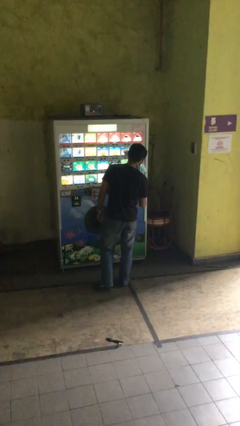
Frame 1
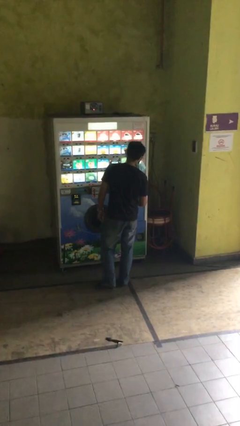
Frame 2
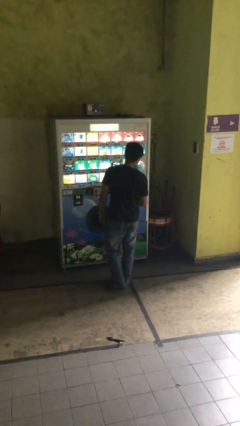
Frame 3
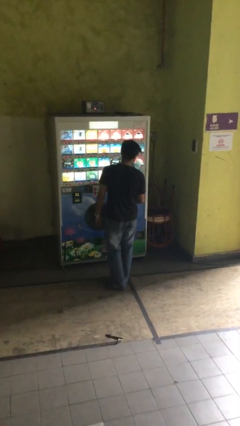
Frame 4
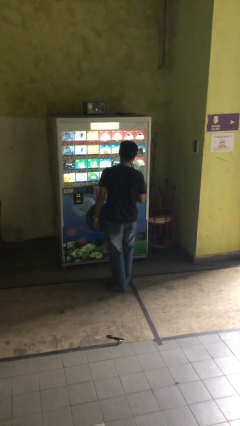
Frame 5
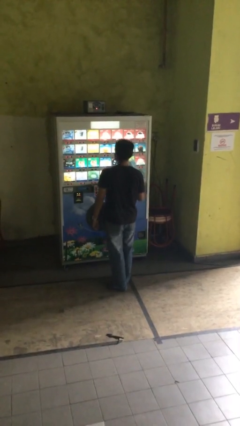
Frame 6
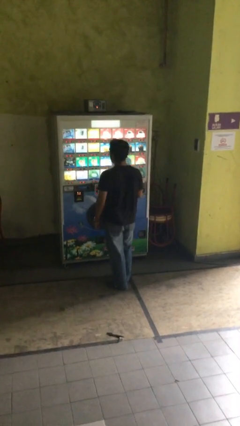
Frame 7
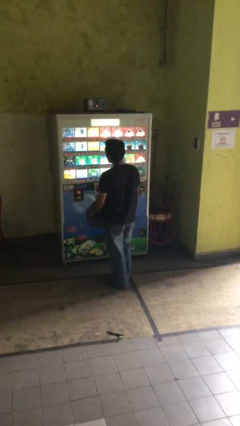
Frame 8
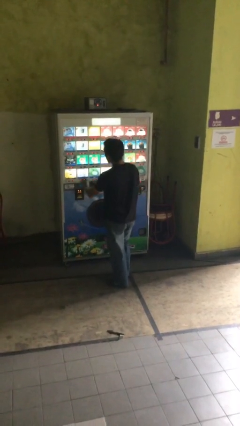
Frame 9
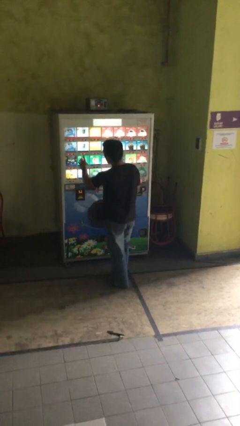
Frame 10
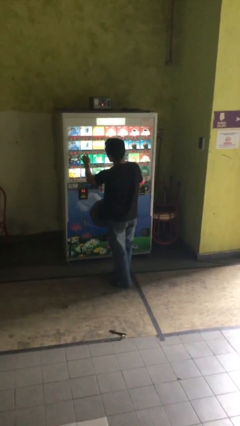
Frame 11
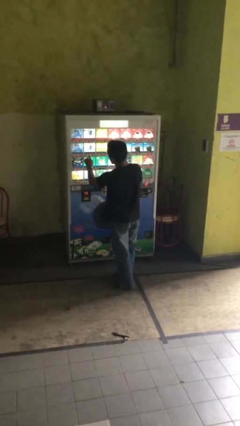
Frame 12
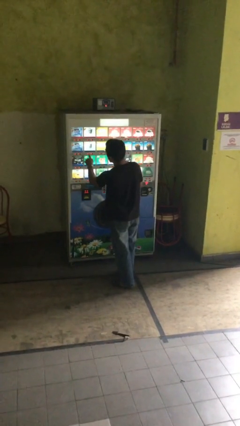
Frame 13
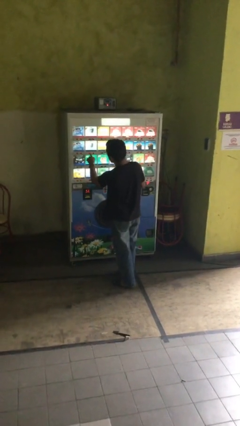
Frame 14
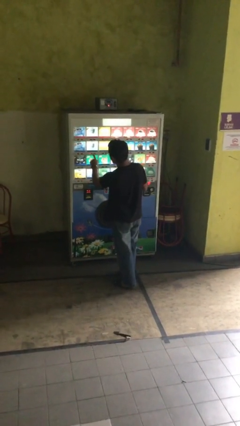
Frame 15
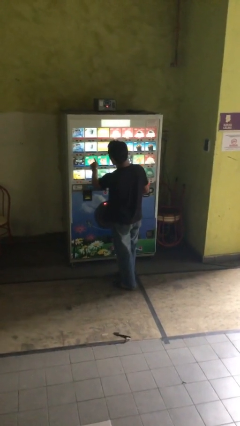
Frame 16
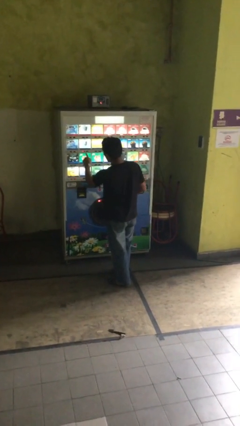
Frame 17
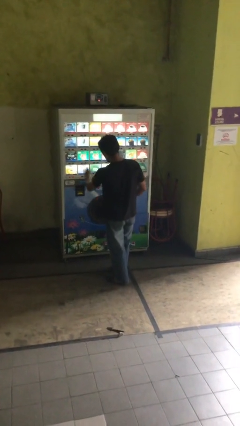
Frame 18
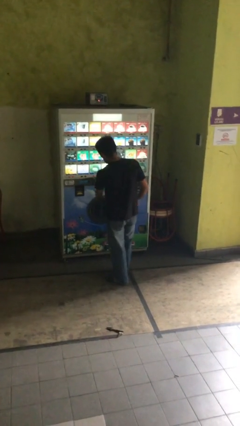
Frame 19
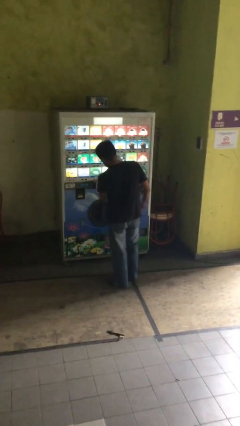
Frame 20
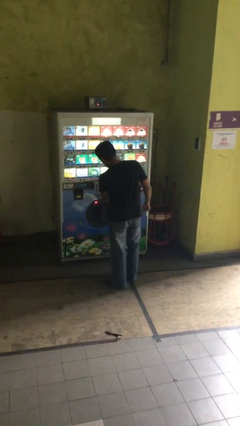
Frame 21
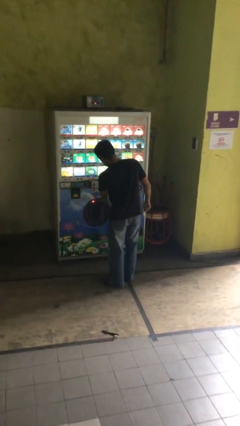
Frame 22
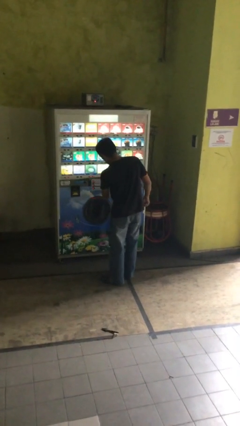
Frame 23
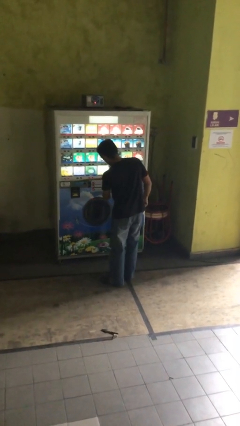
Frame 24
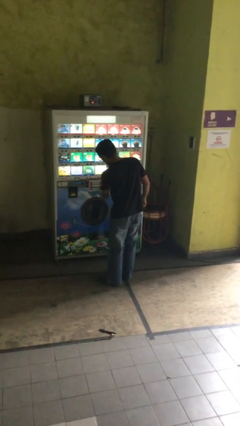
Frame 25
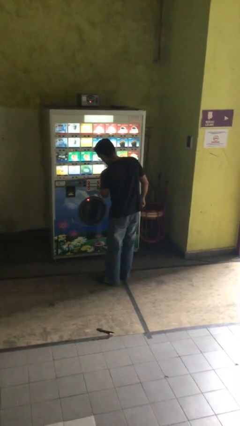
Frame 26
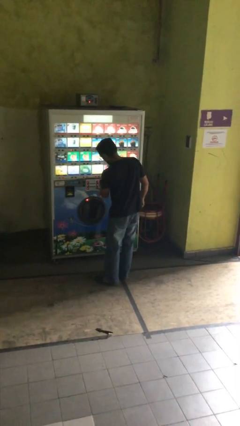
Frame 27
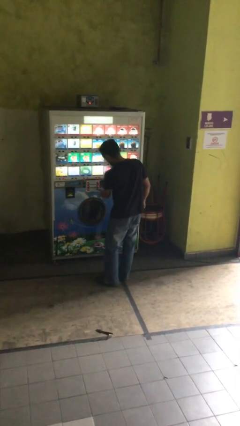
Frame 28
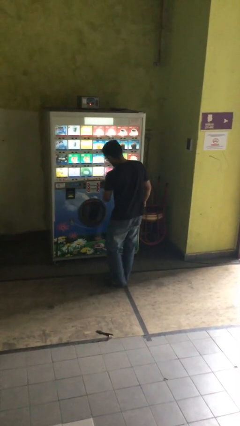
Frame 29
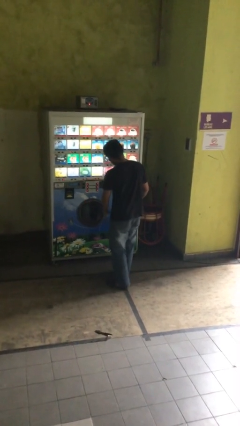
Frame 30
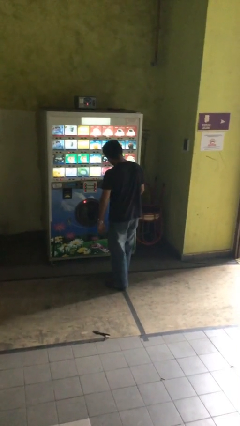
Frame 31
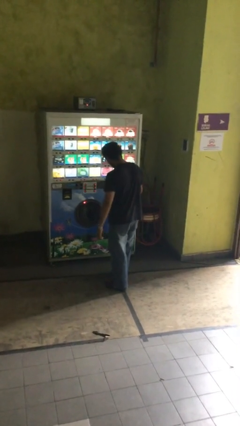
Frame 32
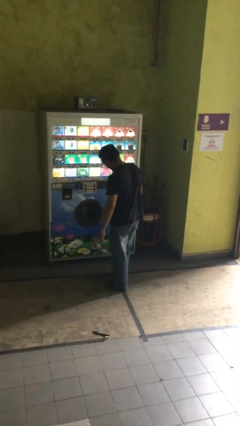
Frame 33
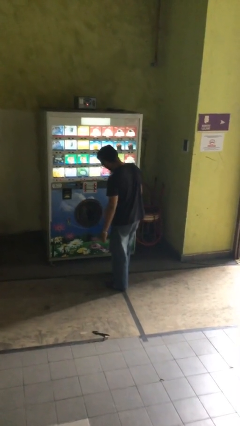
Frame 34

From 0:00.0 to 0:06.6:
person purchases from machine

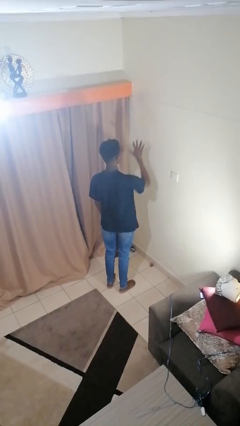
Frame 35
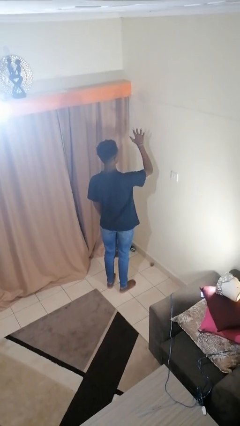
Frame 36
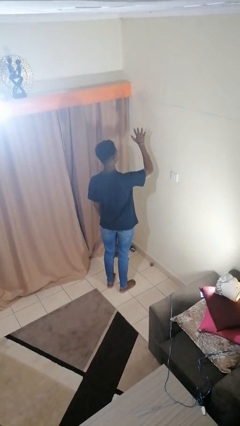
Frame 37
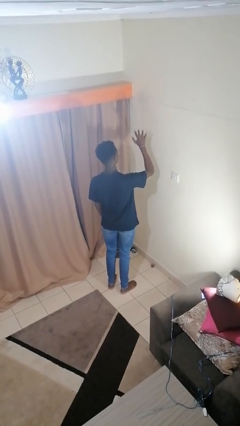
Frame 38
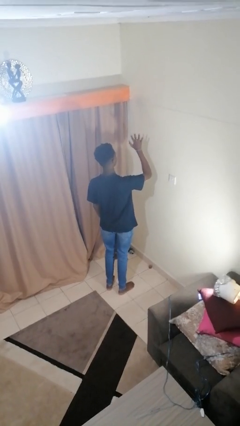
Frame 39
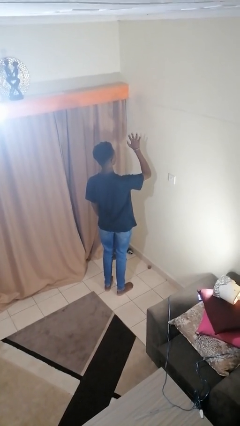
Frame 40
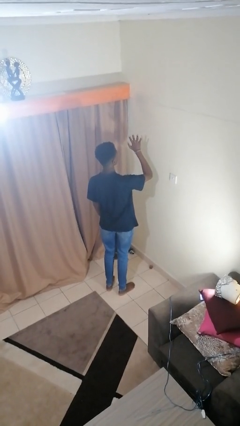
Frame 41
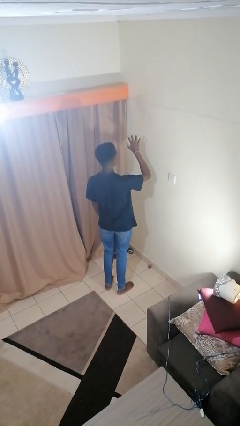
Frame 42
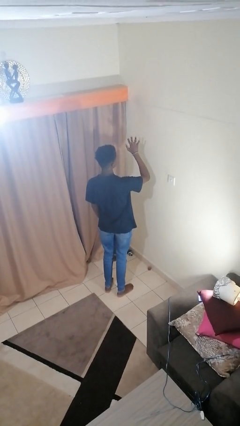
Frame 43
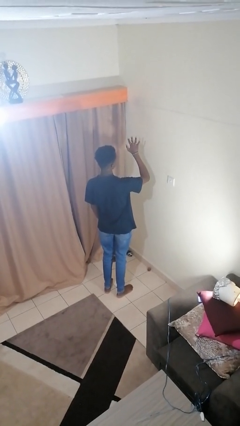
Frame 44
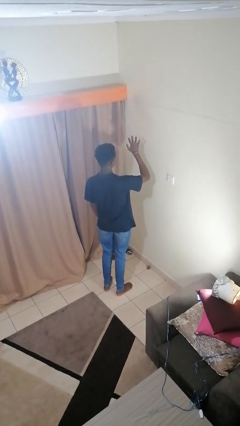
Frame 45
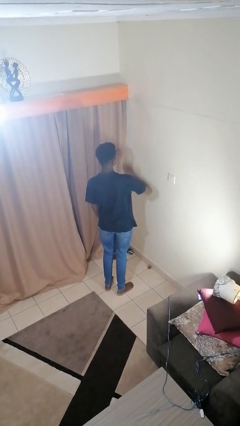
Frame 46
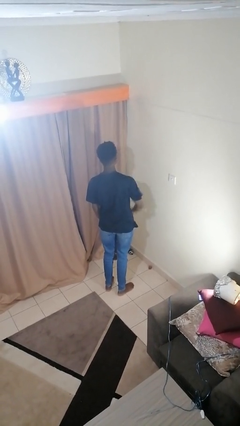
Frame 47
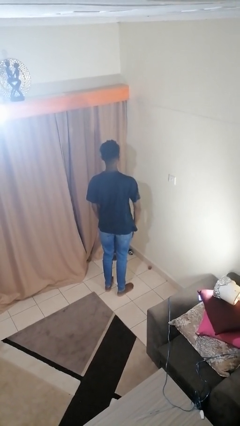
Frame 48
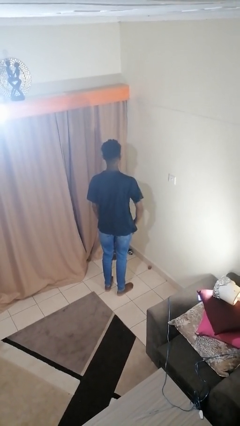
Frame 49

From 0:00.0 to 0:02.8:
person gestures number five

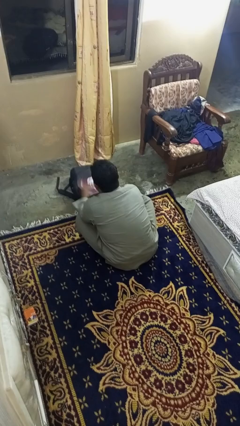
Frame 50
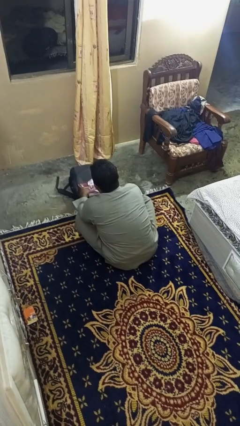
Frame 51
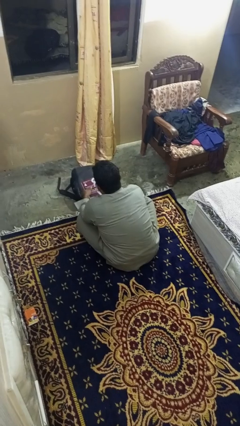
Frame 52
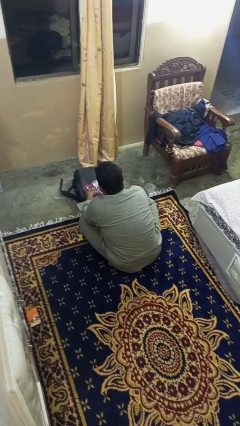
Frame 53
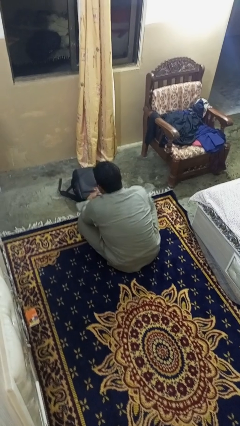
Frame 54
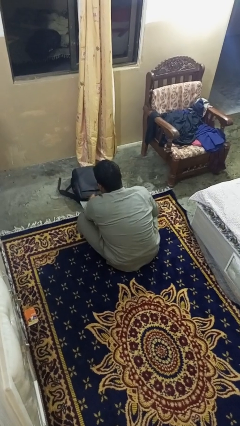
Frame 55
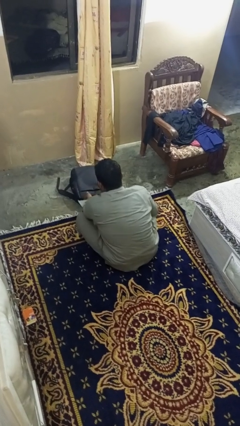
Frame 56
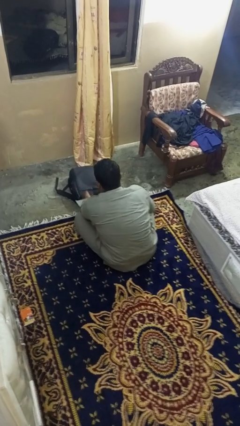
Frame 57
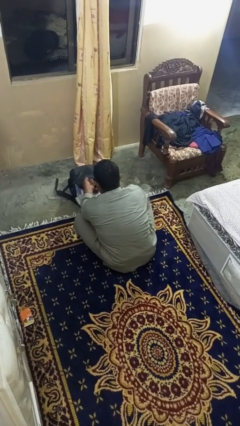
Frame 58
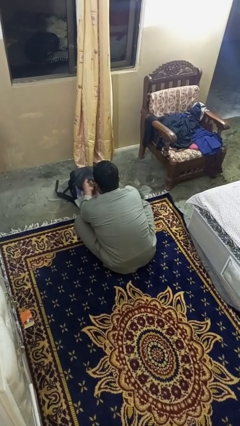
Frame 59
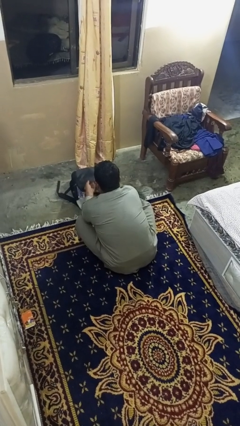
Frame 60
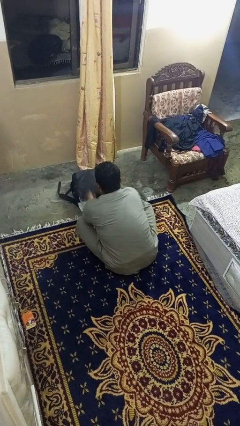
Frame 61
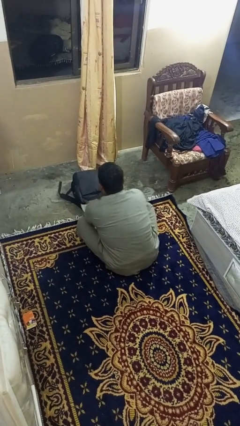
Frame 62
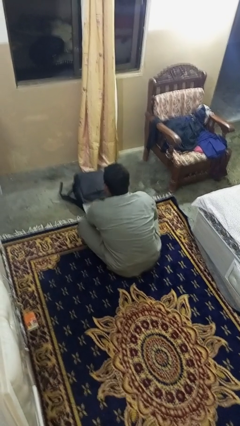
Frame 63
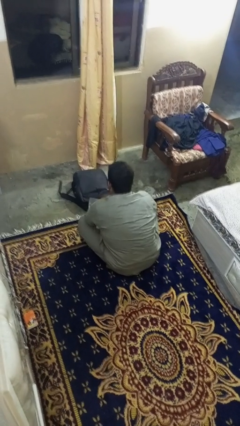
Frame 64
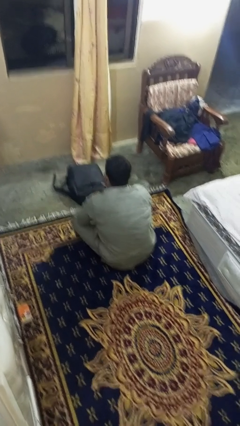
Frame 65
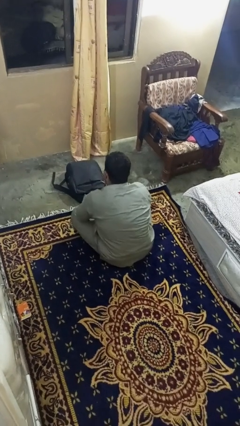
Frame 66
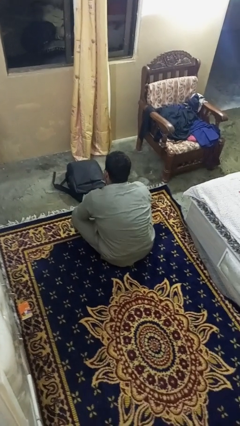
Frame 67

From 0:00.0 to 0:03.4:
person puts object into bag

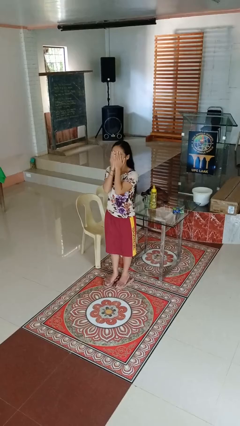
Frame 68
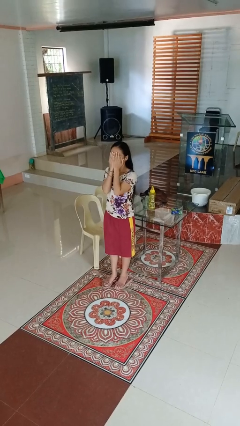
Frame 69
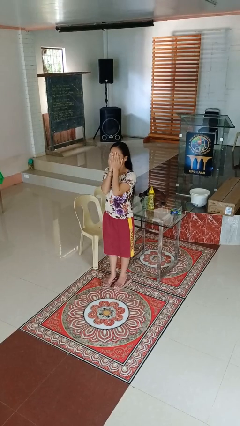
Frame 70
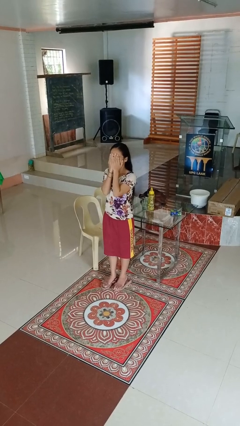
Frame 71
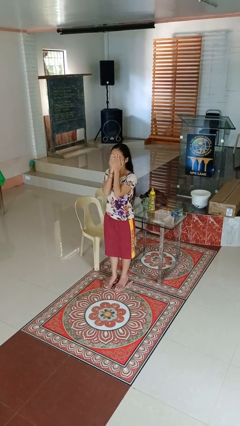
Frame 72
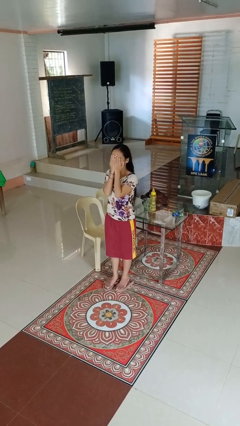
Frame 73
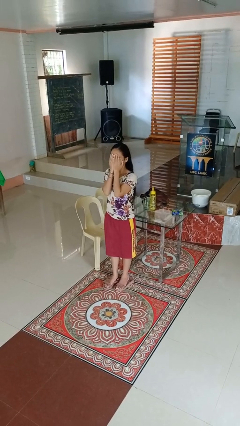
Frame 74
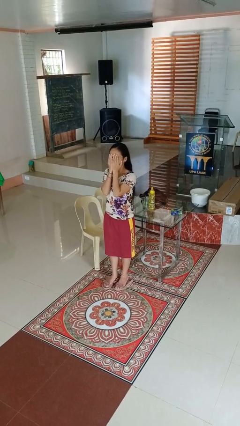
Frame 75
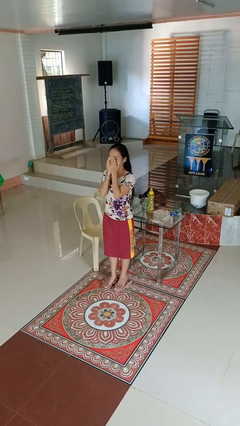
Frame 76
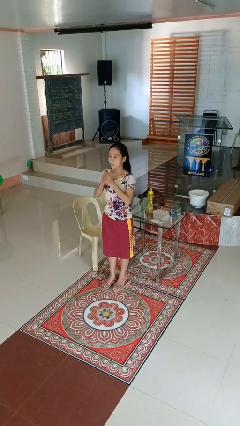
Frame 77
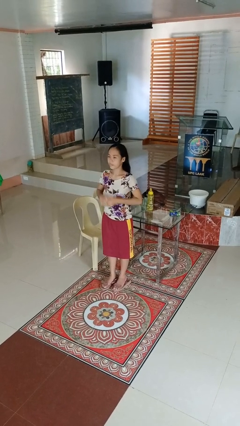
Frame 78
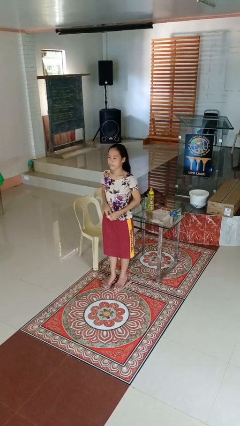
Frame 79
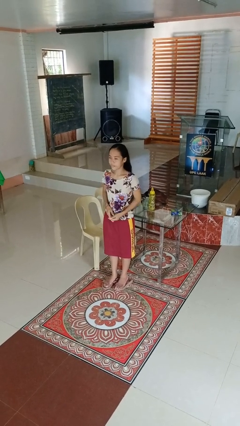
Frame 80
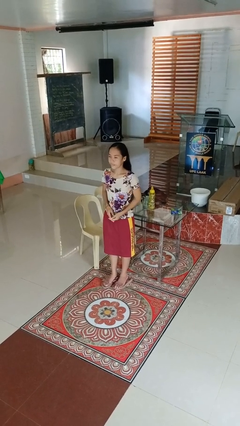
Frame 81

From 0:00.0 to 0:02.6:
person covers face with hands

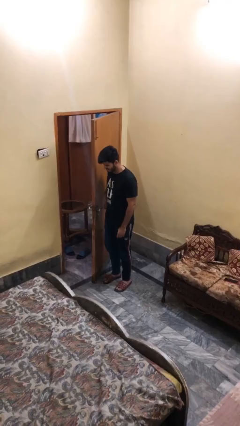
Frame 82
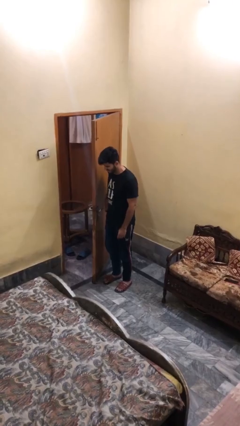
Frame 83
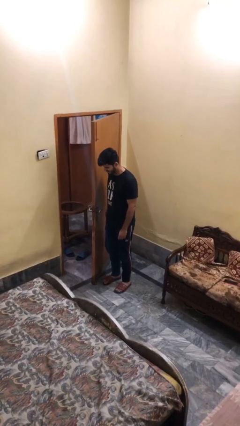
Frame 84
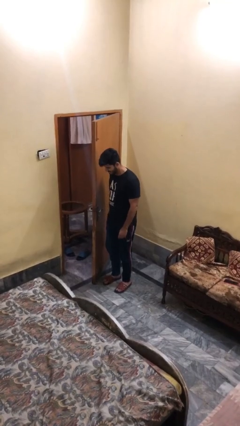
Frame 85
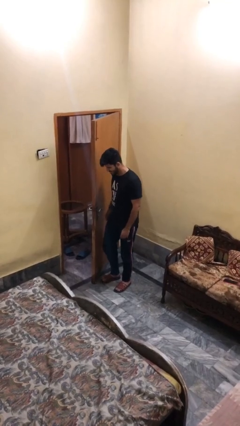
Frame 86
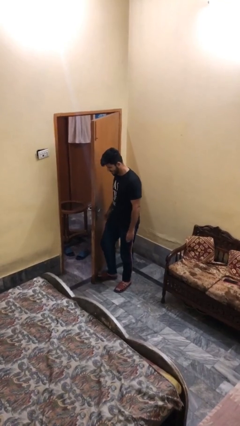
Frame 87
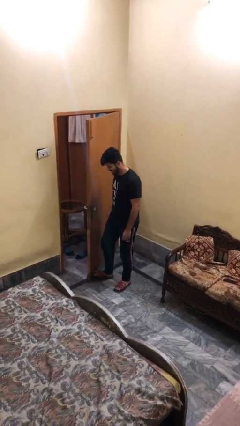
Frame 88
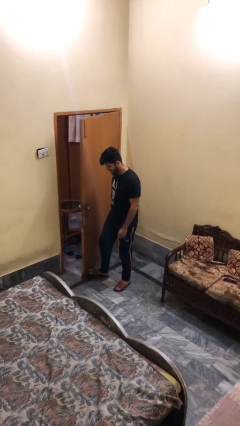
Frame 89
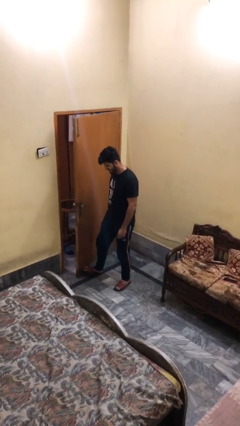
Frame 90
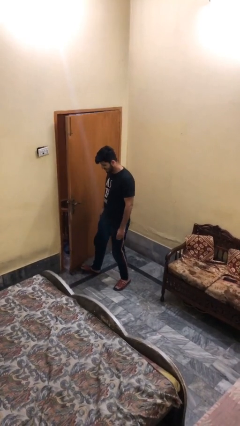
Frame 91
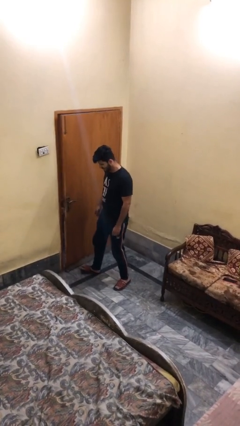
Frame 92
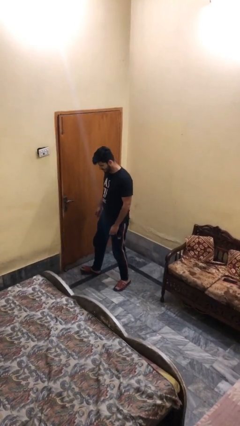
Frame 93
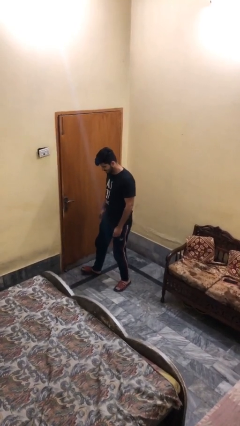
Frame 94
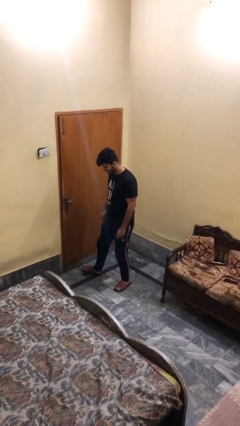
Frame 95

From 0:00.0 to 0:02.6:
person closes door with foot
